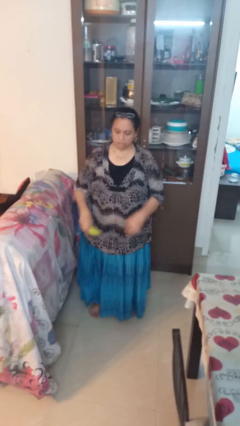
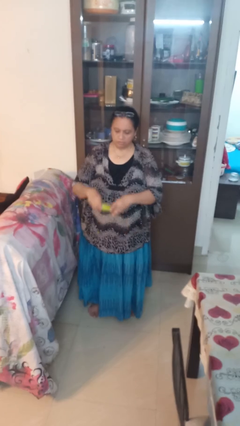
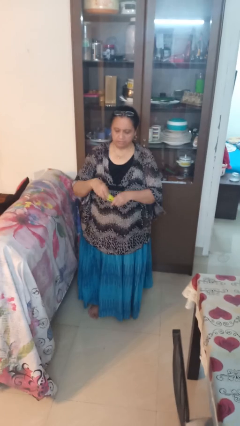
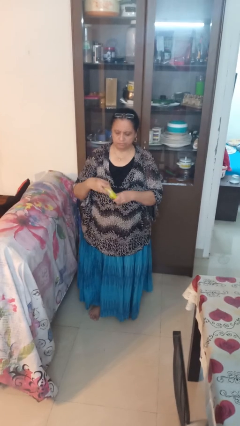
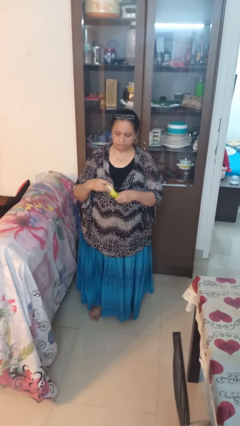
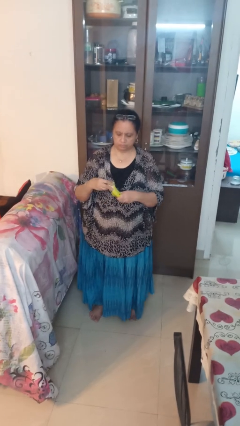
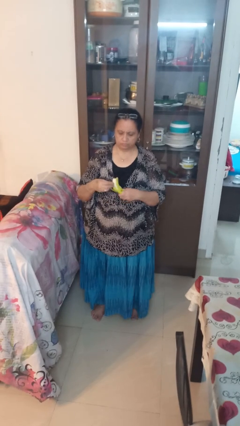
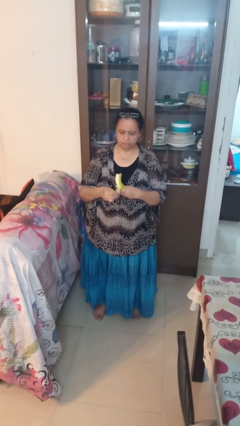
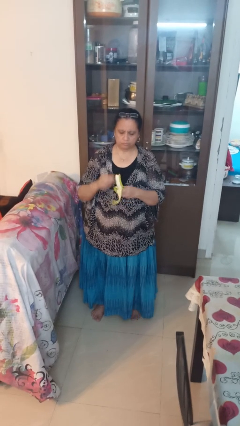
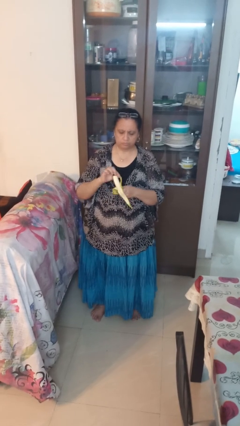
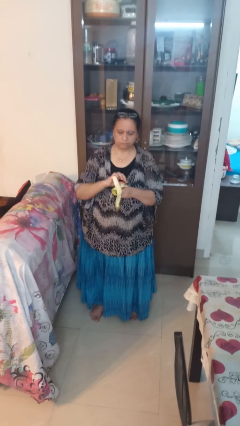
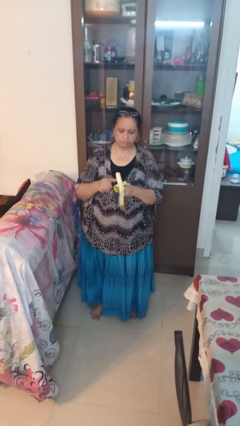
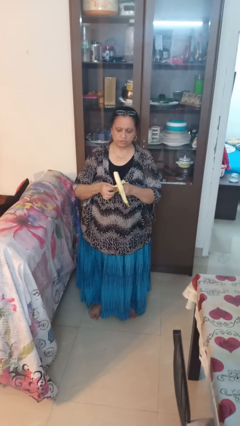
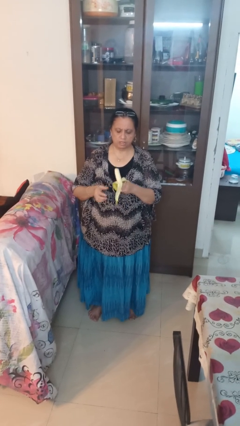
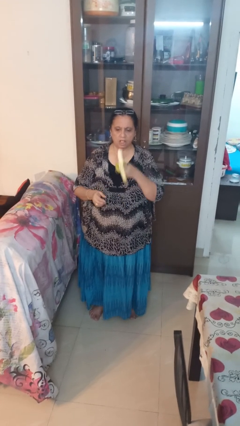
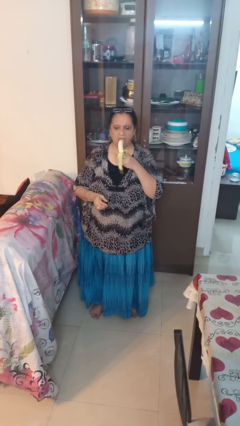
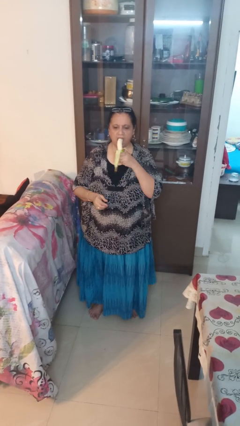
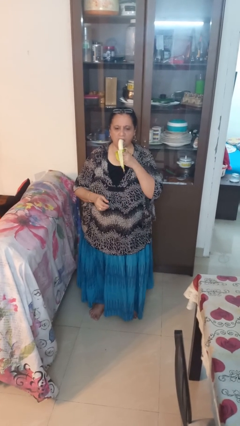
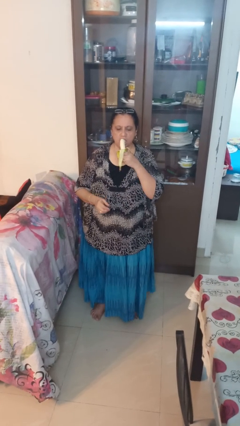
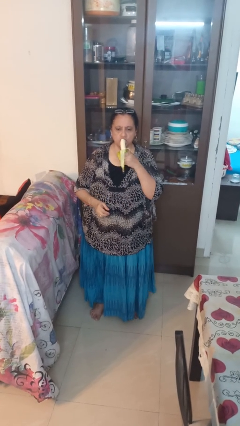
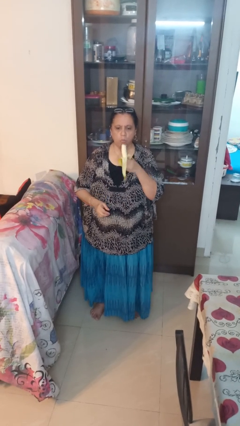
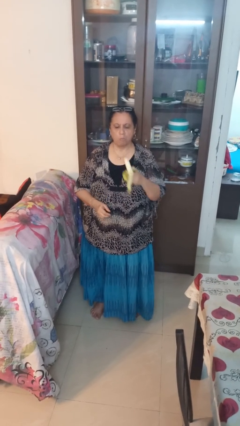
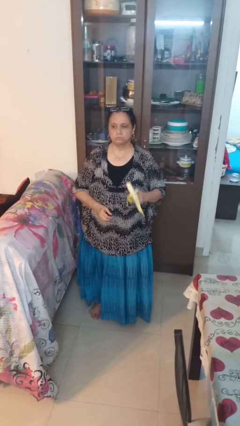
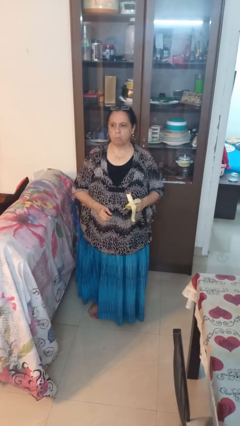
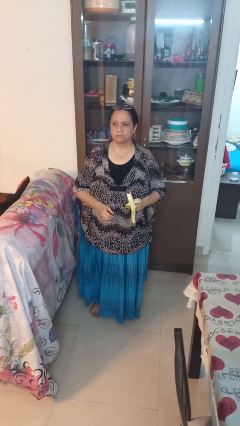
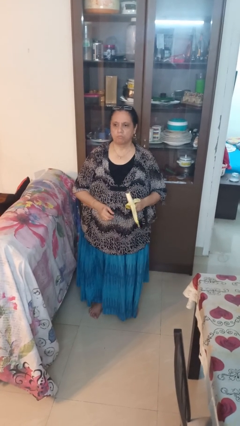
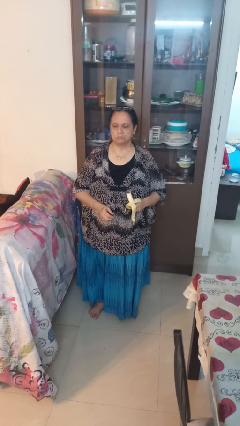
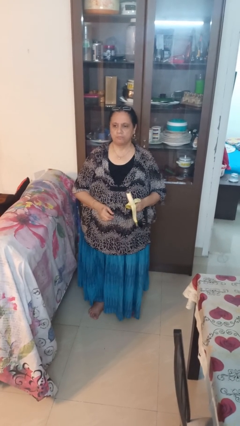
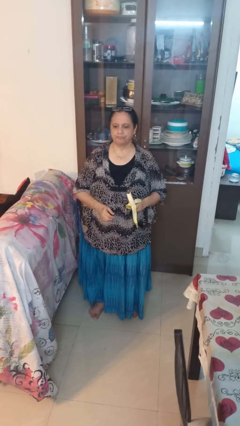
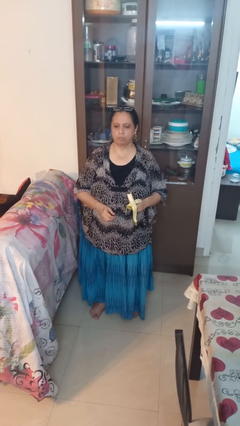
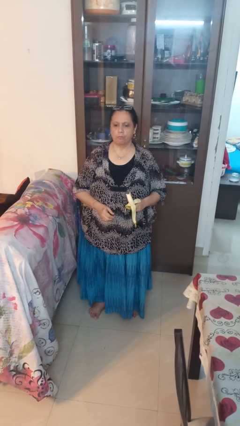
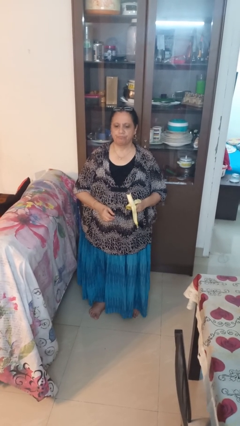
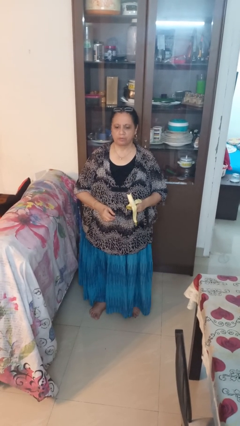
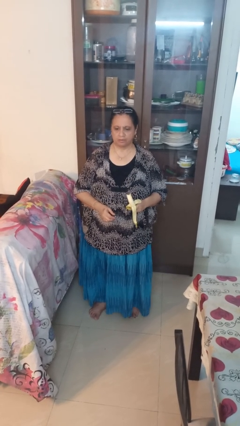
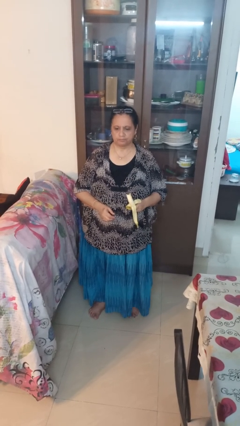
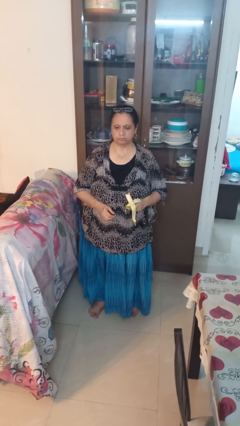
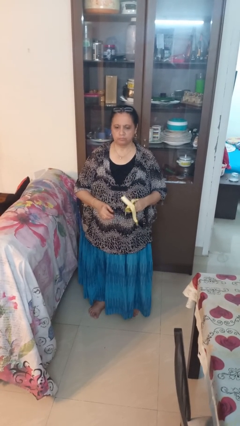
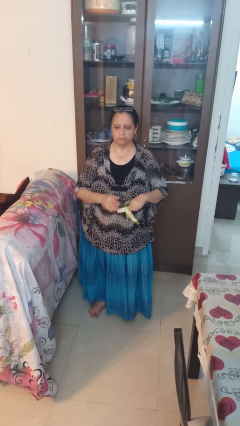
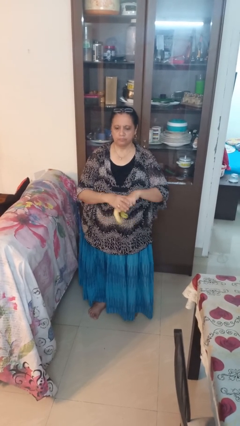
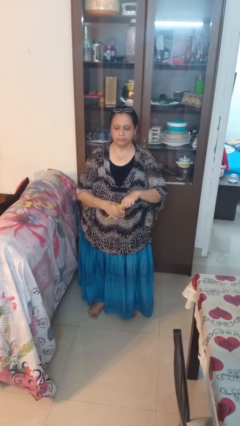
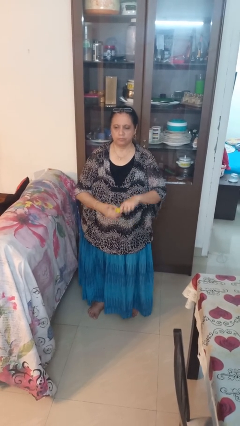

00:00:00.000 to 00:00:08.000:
person eats banana

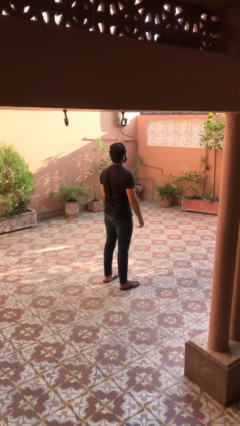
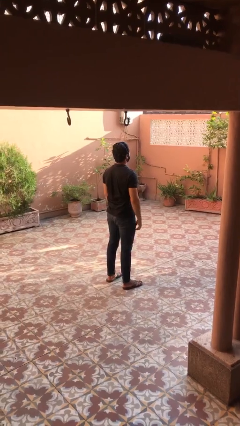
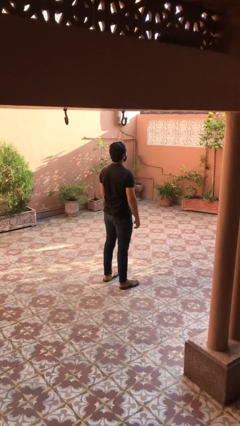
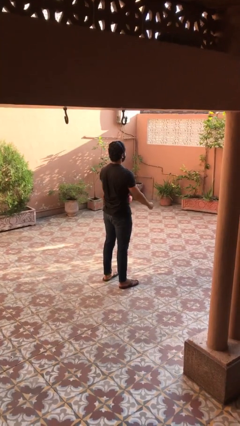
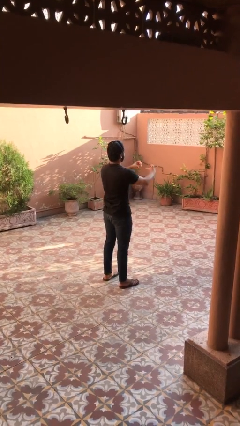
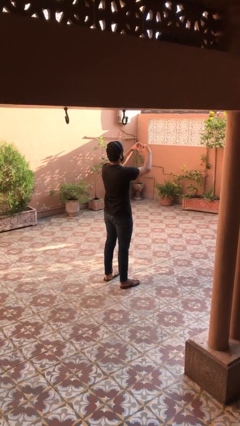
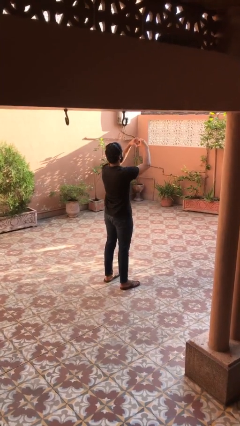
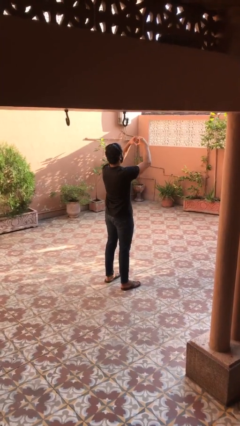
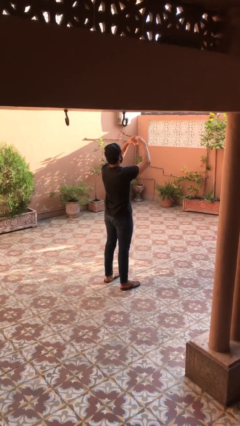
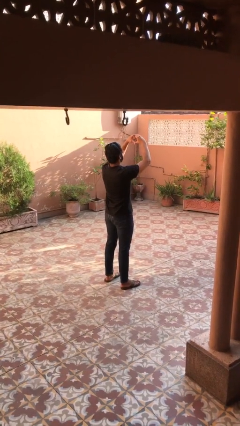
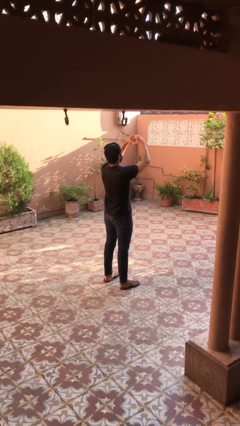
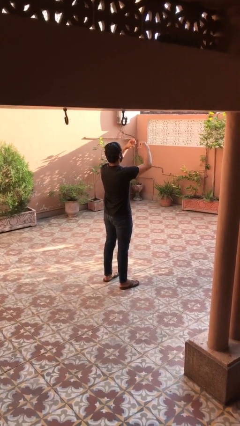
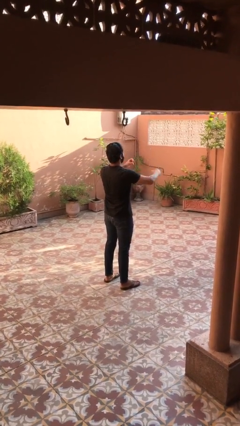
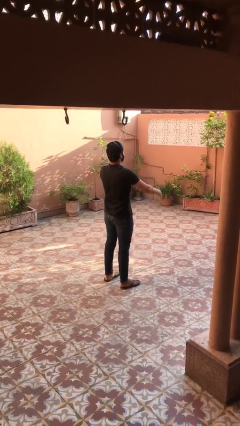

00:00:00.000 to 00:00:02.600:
person gestures heart

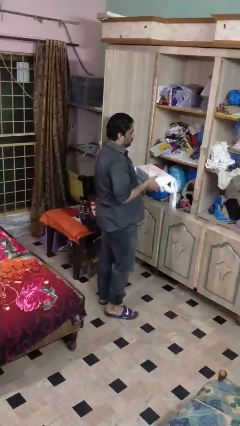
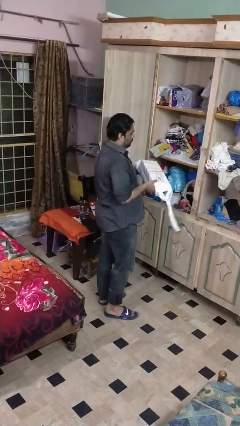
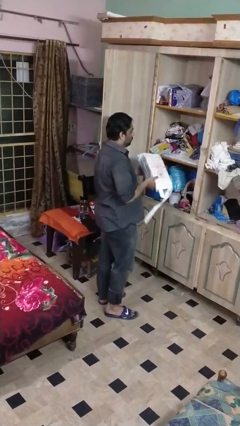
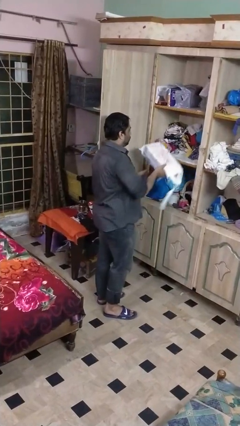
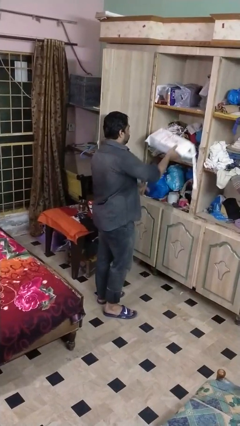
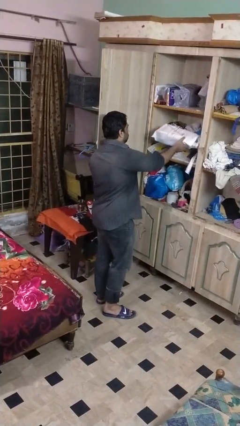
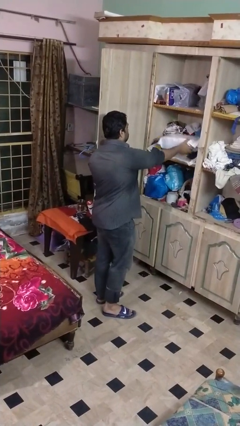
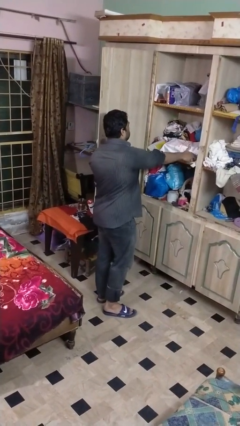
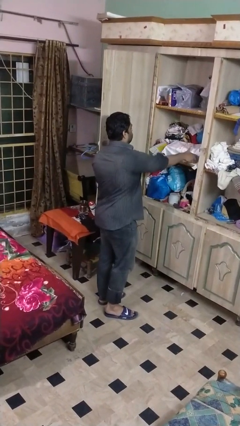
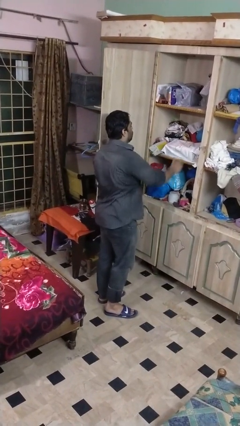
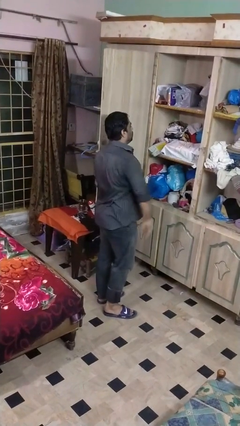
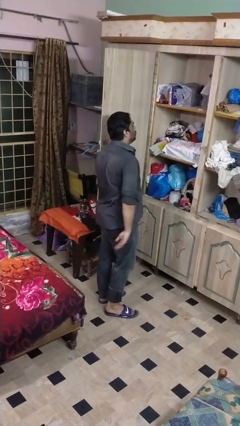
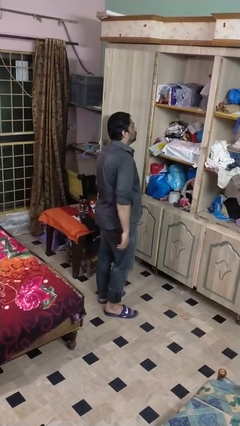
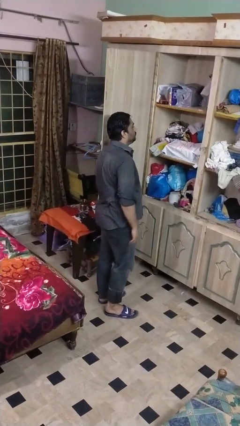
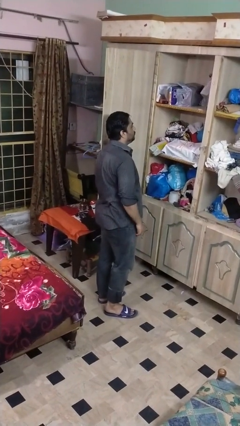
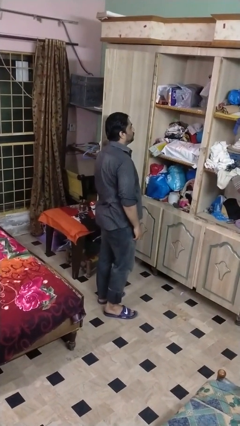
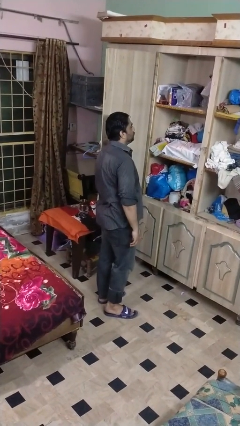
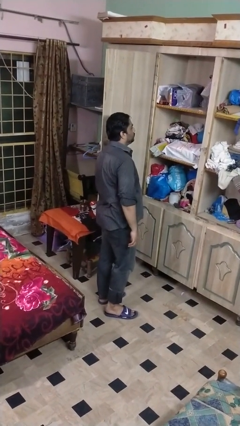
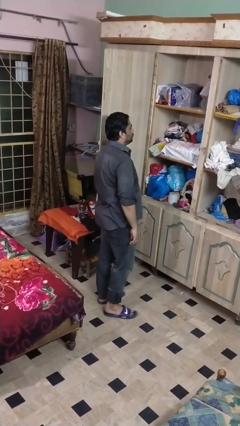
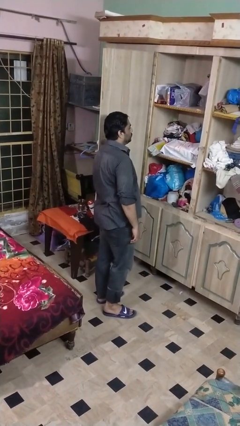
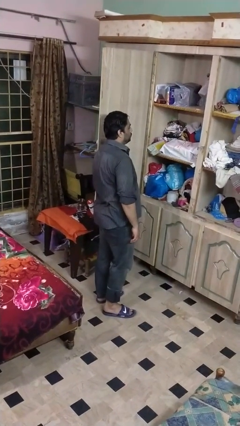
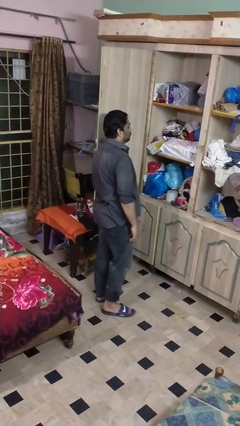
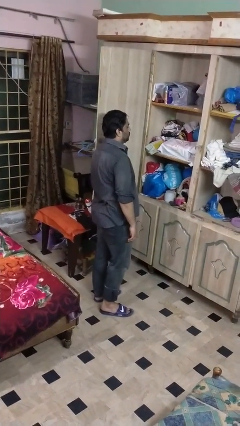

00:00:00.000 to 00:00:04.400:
person puts down object into cabinet

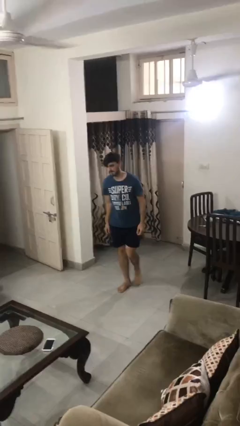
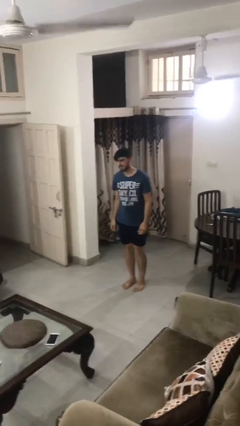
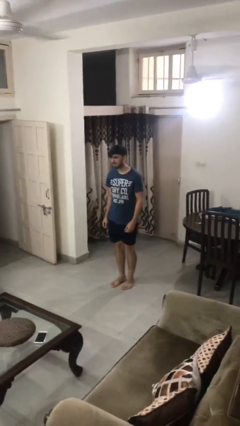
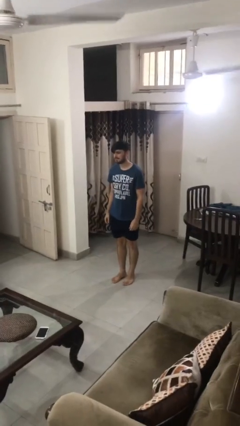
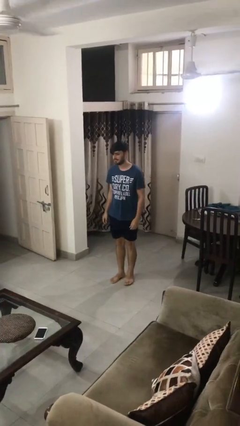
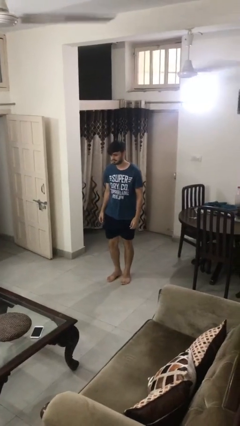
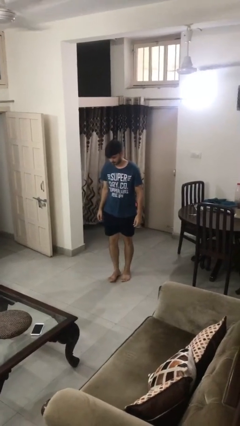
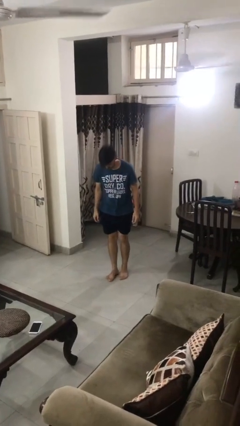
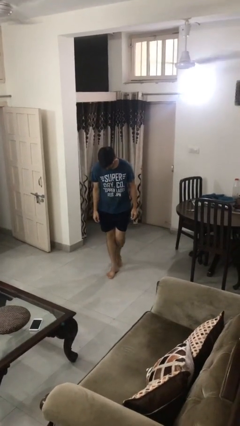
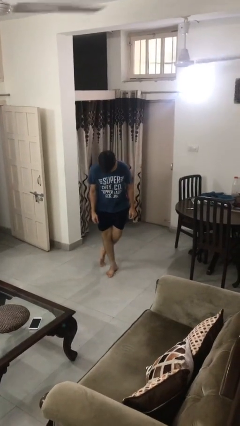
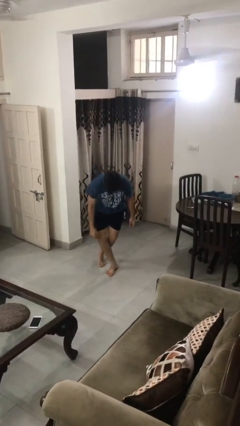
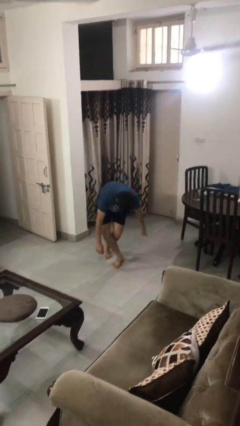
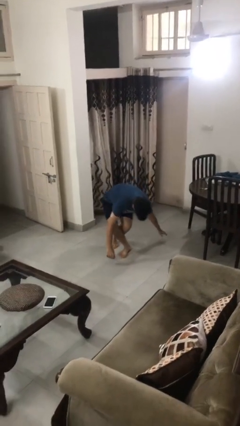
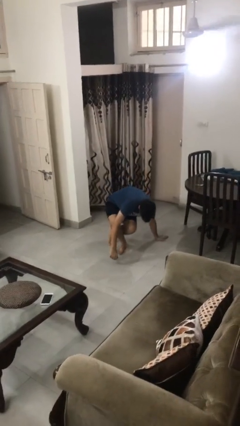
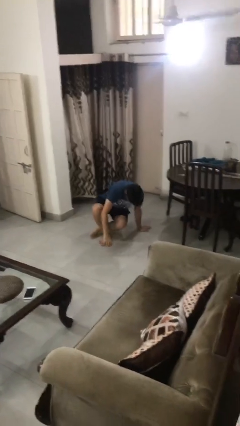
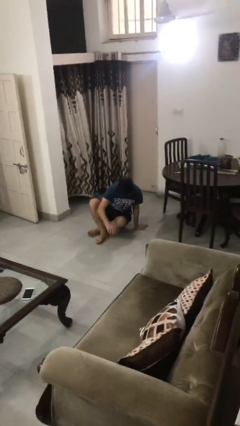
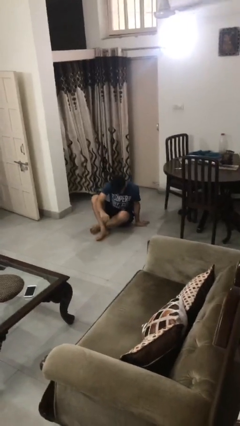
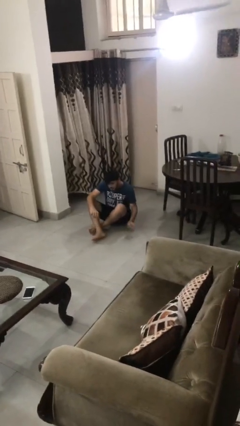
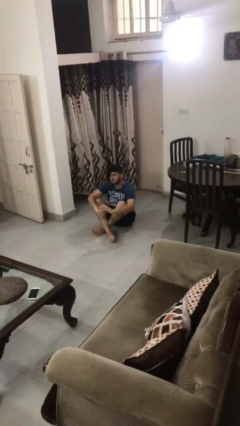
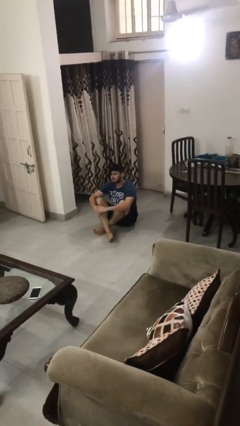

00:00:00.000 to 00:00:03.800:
person sits crisscross
